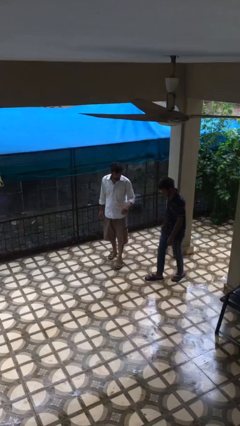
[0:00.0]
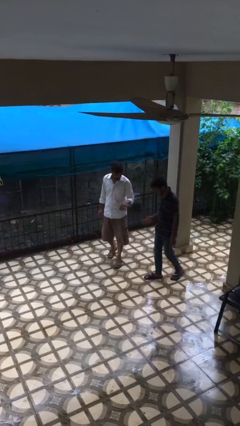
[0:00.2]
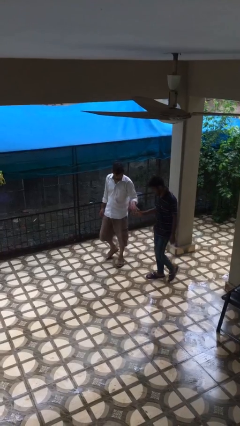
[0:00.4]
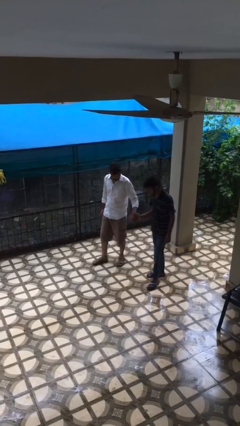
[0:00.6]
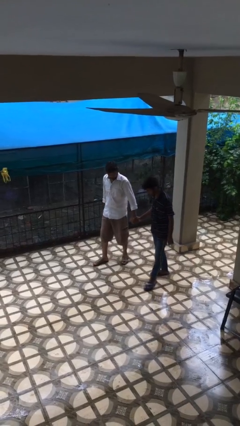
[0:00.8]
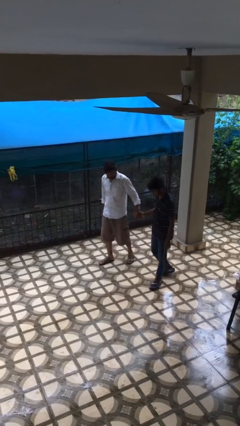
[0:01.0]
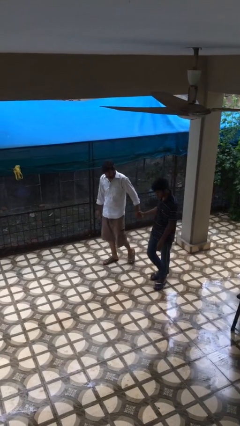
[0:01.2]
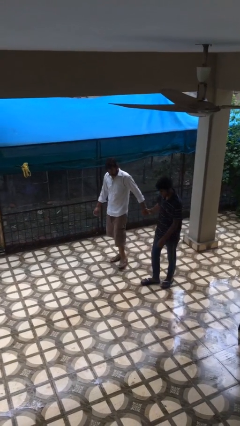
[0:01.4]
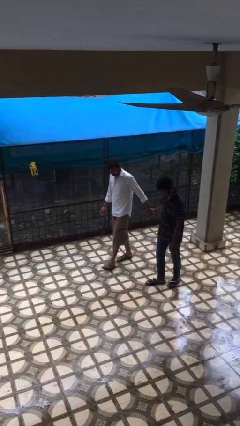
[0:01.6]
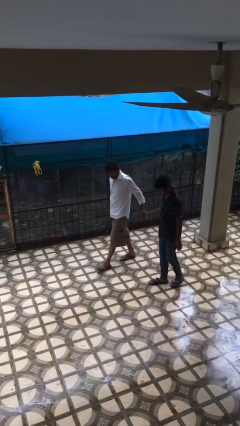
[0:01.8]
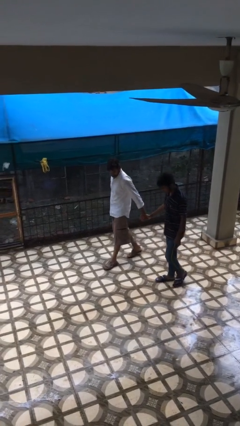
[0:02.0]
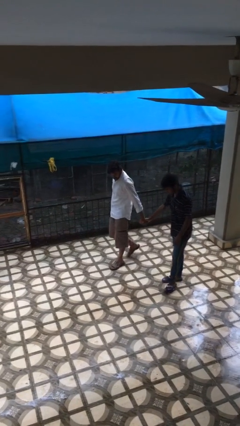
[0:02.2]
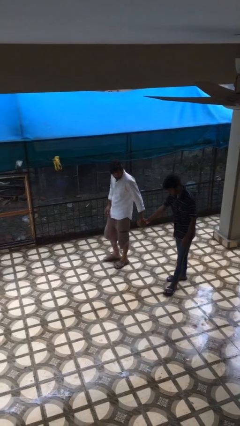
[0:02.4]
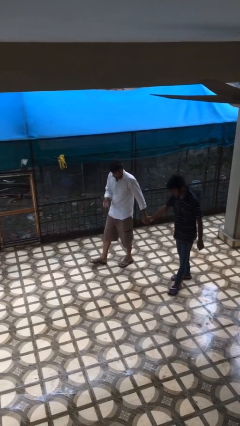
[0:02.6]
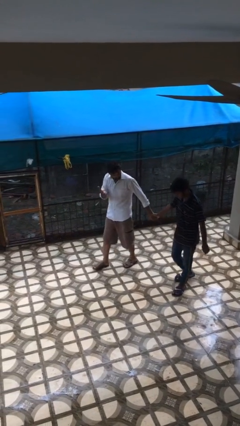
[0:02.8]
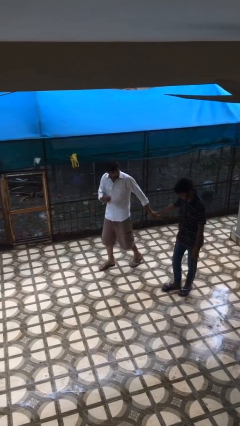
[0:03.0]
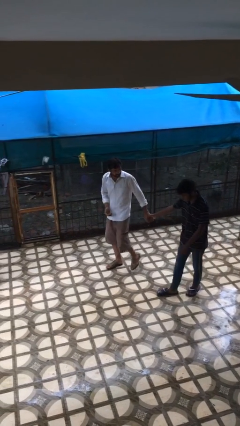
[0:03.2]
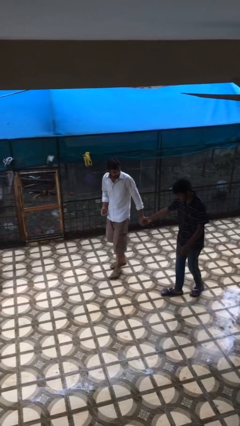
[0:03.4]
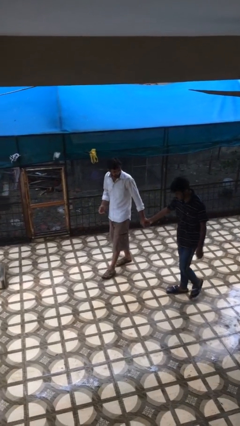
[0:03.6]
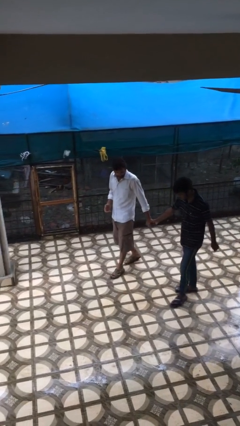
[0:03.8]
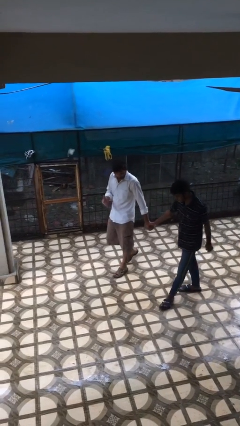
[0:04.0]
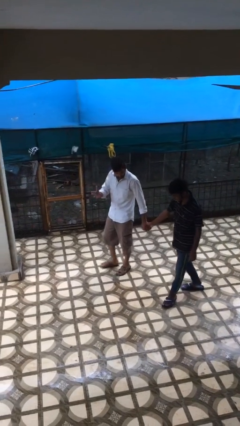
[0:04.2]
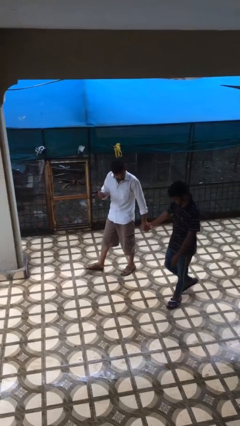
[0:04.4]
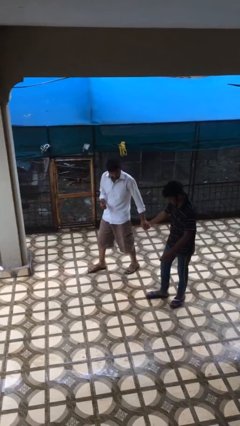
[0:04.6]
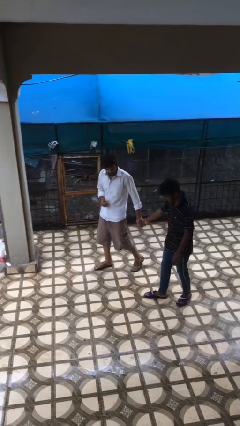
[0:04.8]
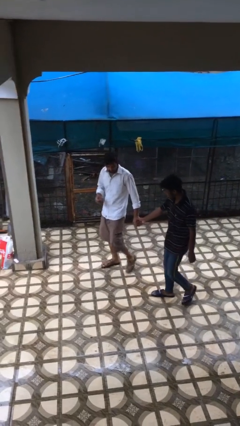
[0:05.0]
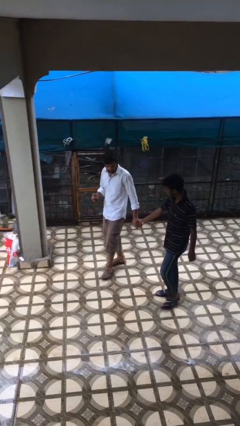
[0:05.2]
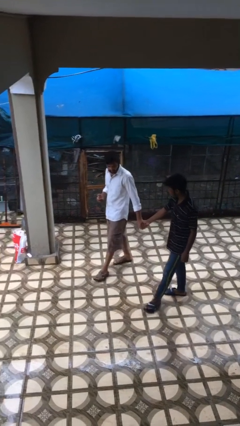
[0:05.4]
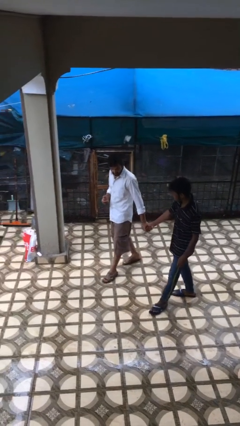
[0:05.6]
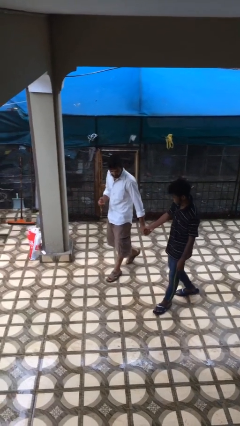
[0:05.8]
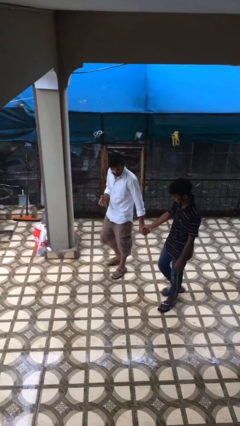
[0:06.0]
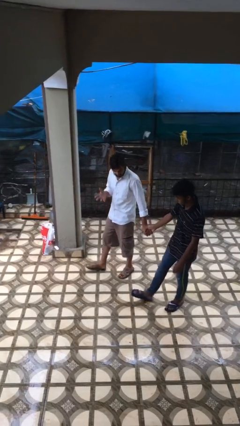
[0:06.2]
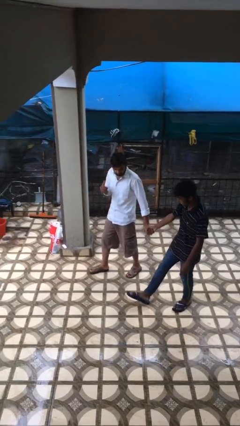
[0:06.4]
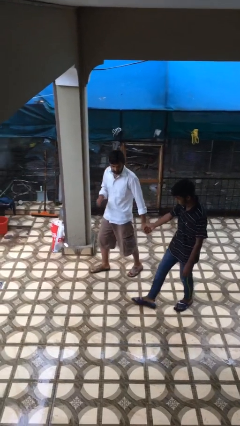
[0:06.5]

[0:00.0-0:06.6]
person holds hand

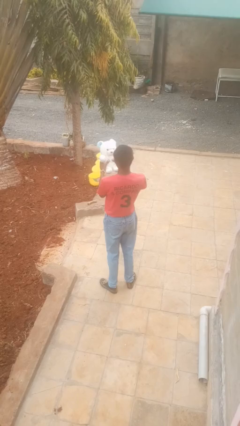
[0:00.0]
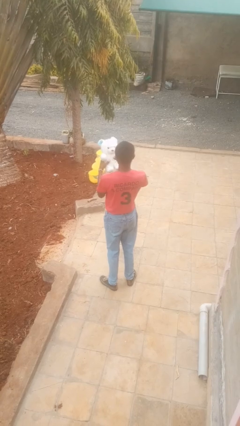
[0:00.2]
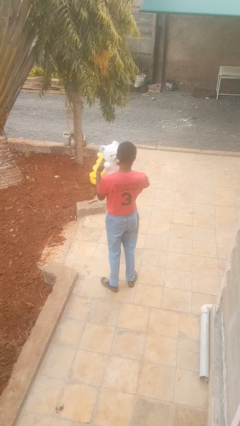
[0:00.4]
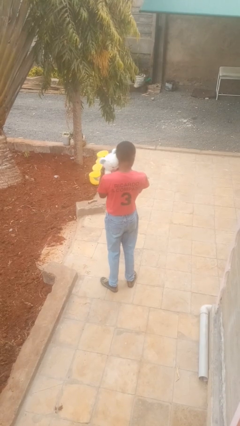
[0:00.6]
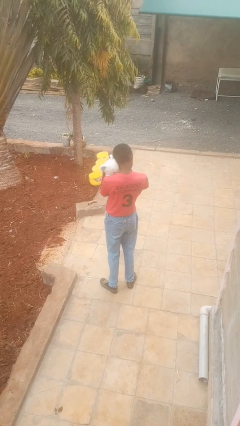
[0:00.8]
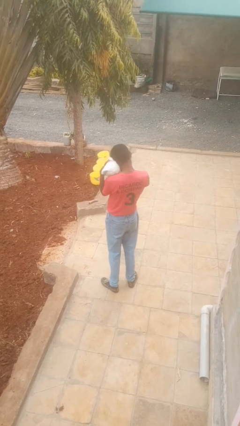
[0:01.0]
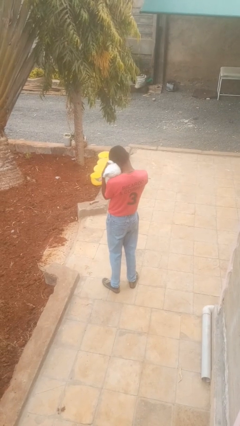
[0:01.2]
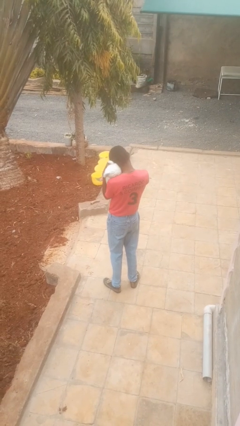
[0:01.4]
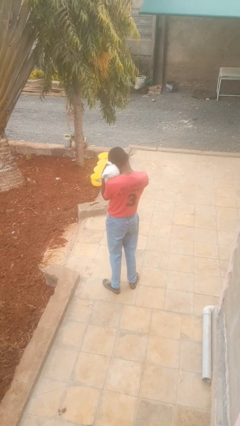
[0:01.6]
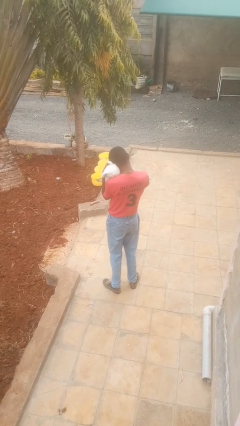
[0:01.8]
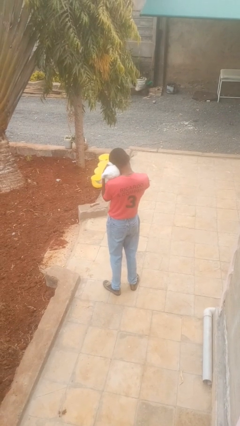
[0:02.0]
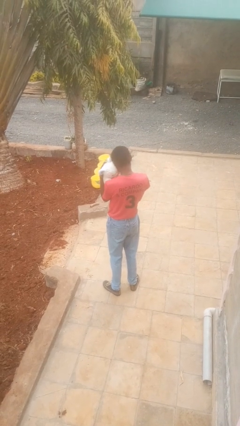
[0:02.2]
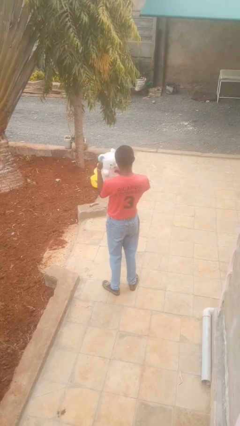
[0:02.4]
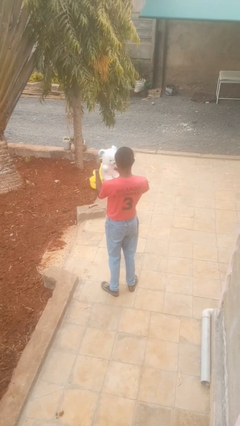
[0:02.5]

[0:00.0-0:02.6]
person hugs stuffed animal

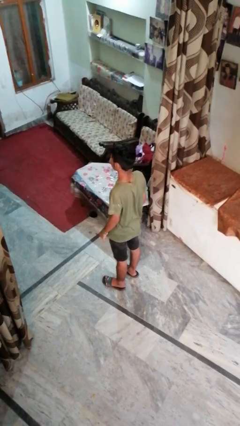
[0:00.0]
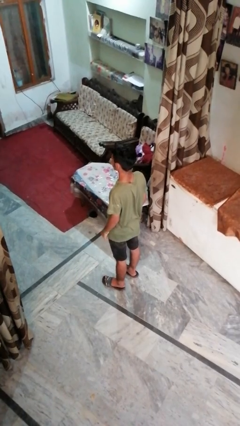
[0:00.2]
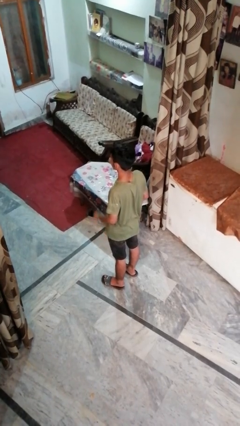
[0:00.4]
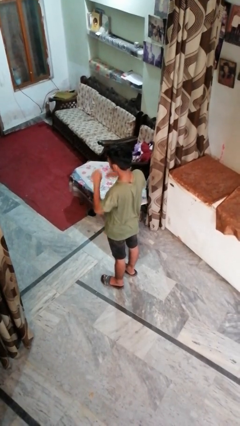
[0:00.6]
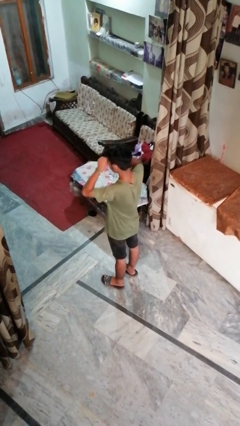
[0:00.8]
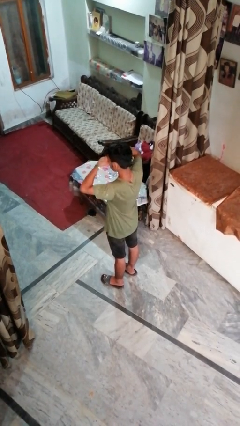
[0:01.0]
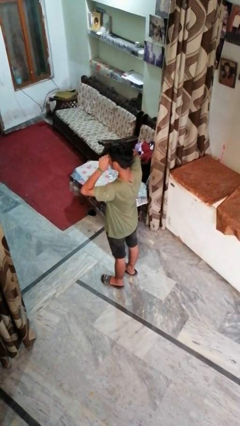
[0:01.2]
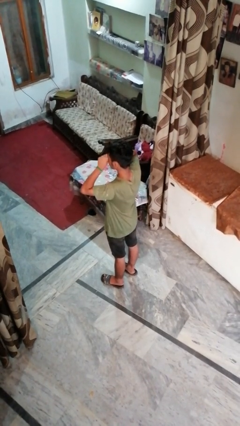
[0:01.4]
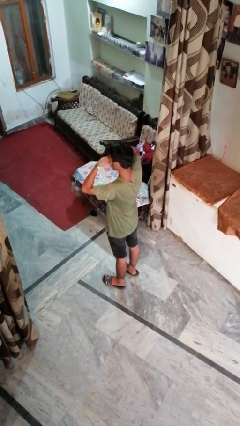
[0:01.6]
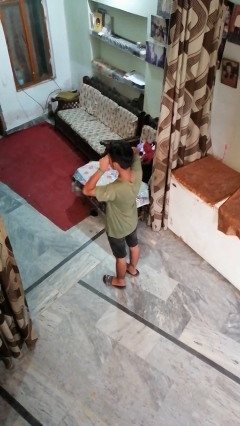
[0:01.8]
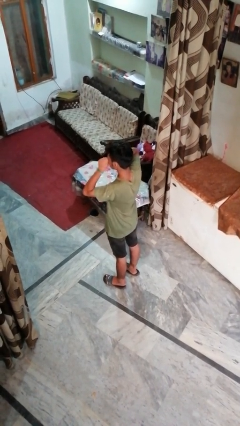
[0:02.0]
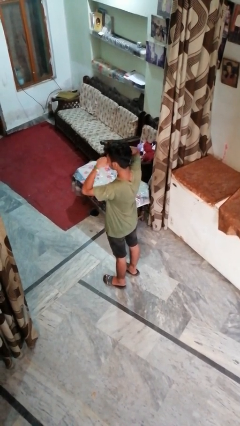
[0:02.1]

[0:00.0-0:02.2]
person rubs eyes

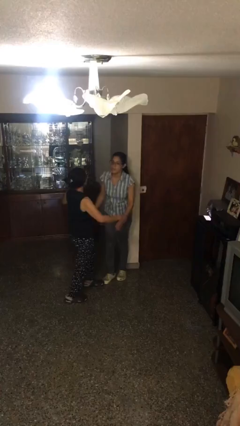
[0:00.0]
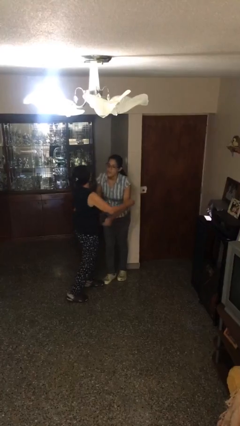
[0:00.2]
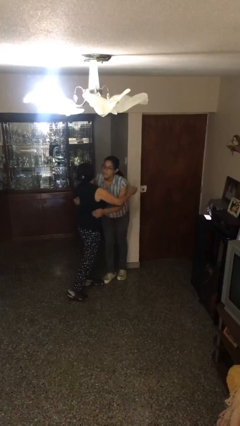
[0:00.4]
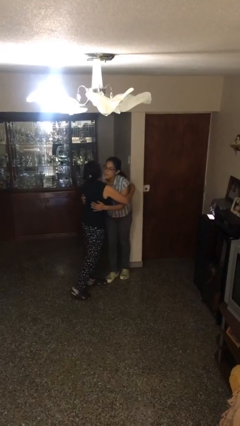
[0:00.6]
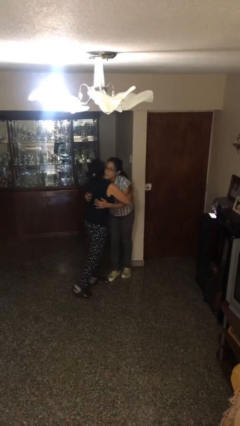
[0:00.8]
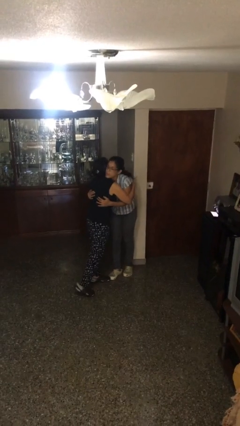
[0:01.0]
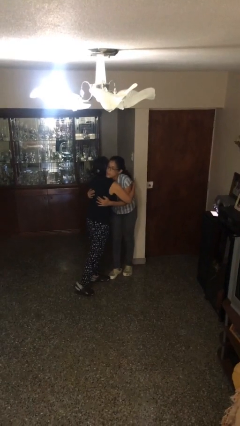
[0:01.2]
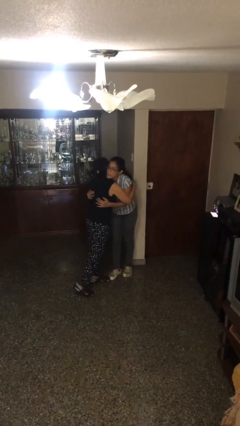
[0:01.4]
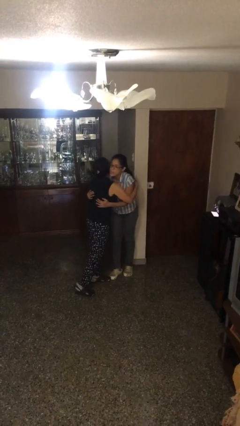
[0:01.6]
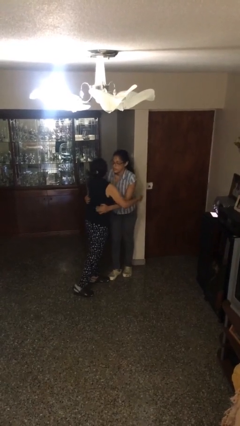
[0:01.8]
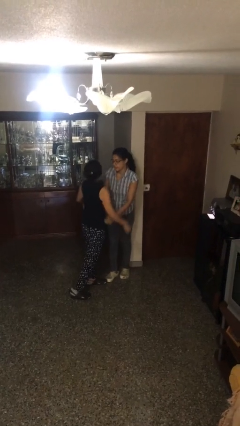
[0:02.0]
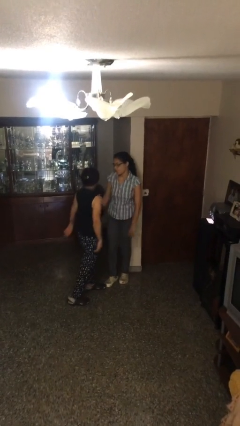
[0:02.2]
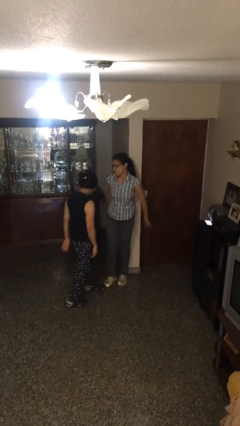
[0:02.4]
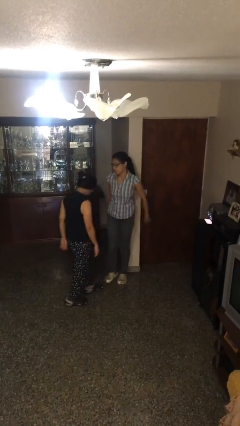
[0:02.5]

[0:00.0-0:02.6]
person embraces person

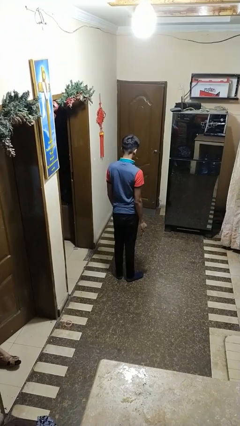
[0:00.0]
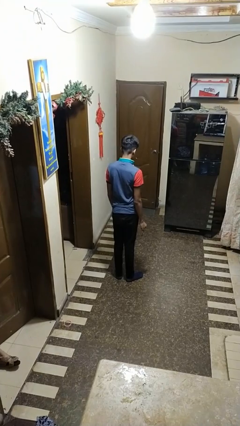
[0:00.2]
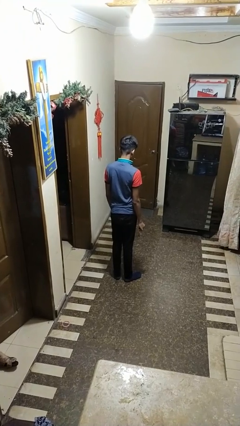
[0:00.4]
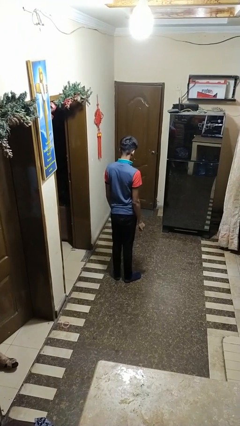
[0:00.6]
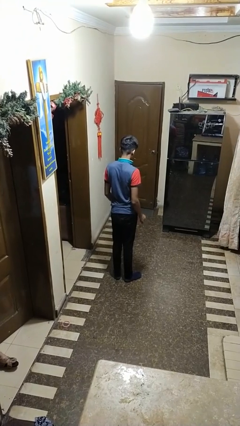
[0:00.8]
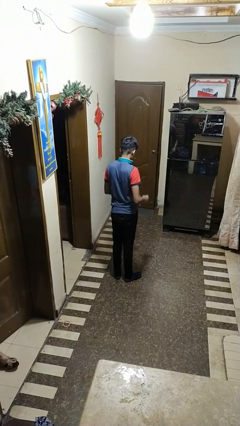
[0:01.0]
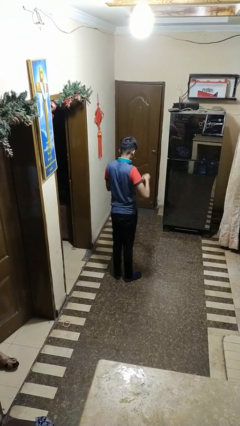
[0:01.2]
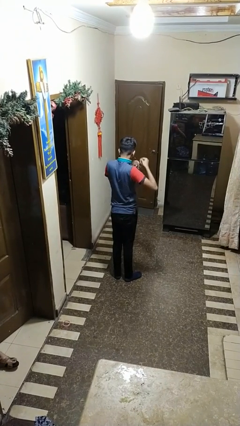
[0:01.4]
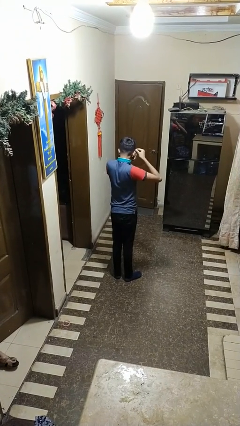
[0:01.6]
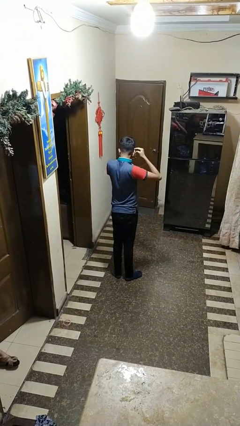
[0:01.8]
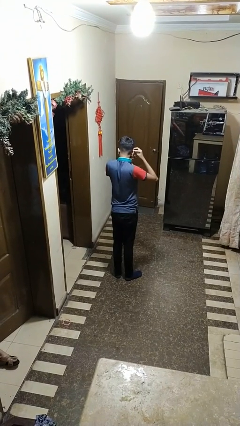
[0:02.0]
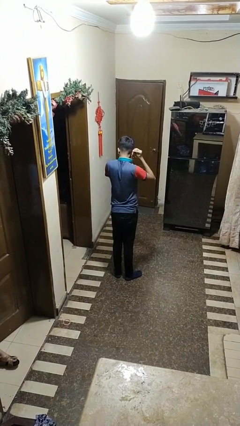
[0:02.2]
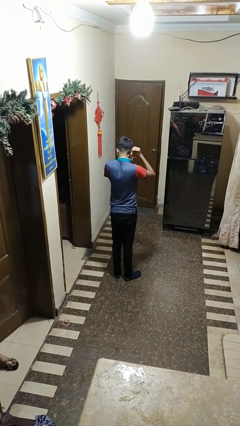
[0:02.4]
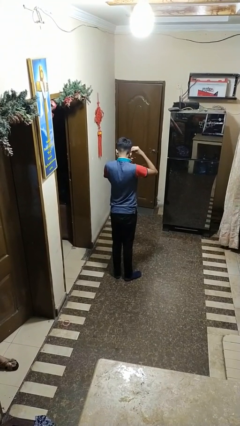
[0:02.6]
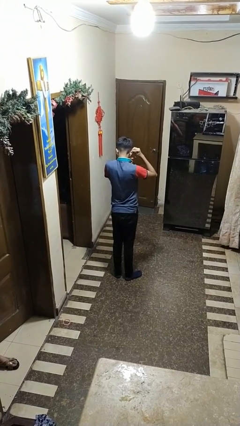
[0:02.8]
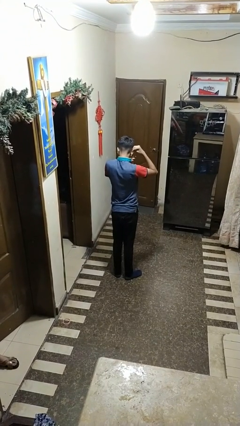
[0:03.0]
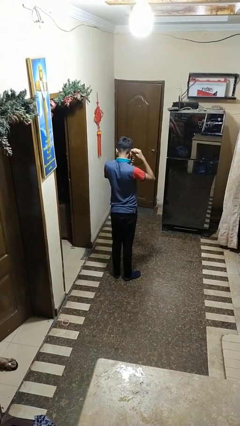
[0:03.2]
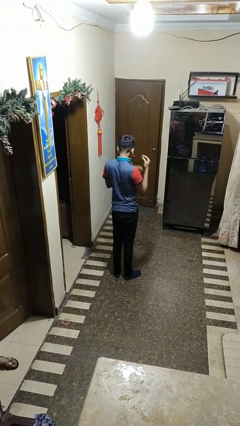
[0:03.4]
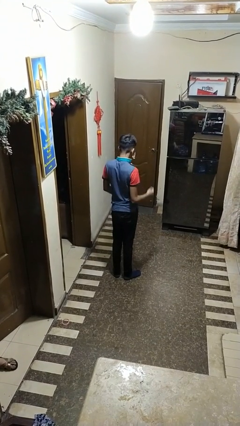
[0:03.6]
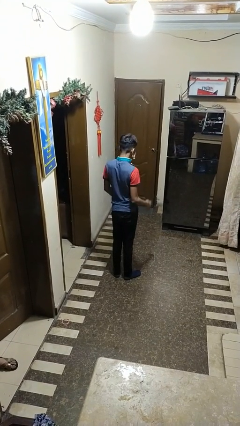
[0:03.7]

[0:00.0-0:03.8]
person puts on earrings
